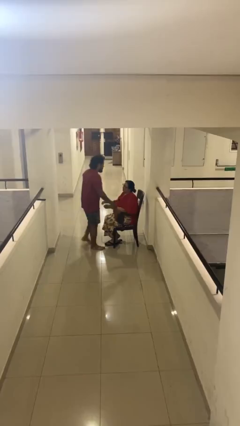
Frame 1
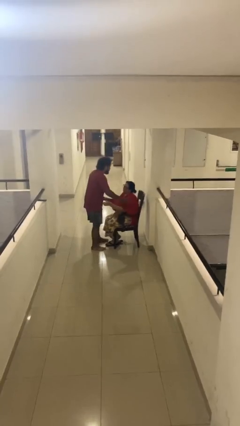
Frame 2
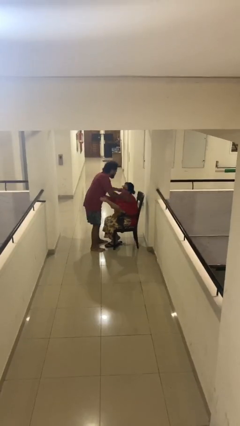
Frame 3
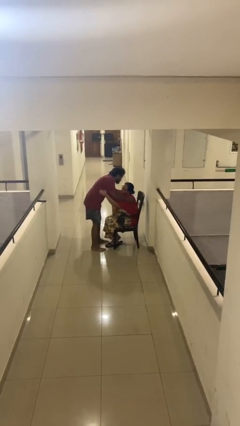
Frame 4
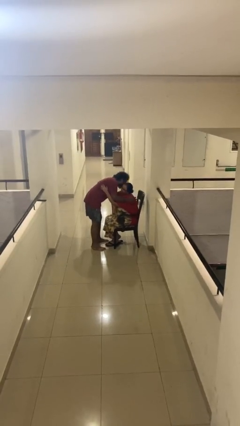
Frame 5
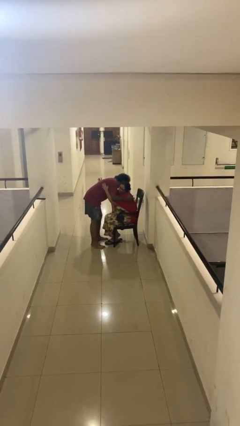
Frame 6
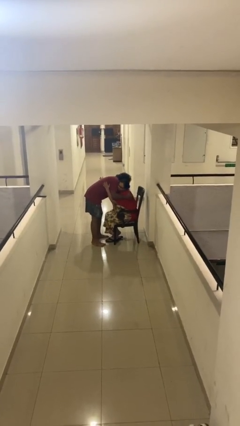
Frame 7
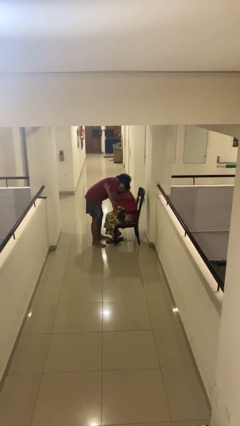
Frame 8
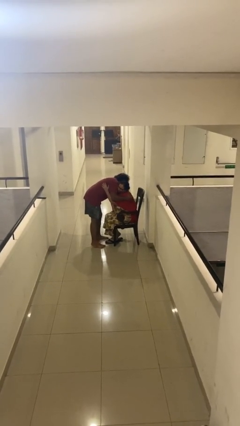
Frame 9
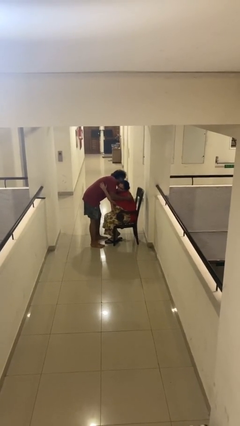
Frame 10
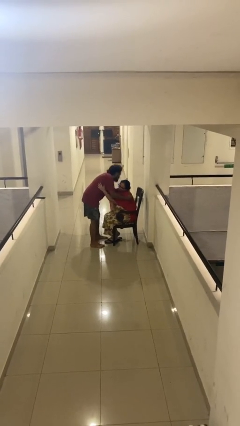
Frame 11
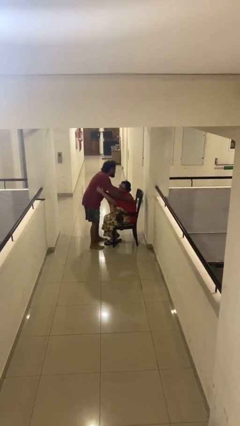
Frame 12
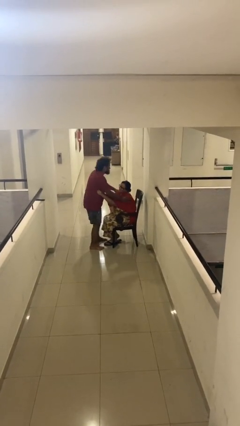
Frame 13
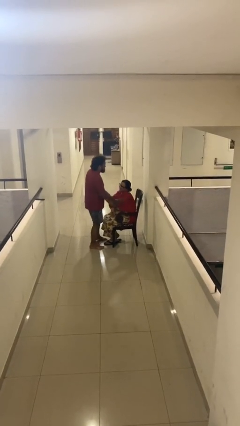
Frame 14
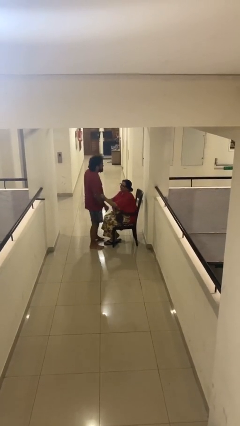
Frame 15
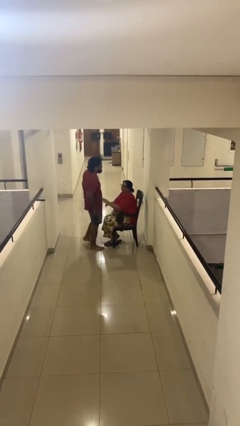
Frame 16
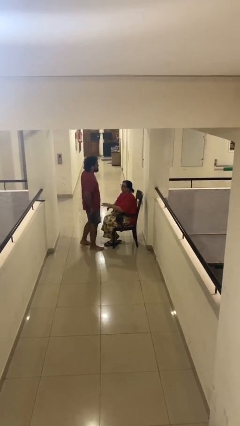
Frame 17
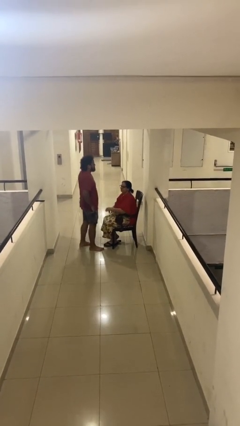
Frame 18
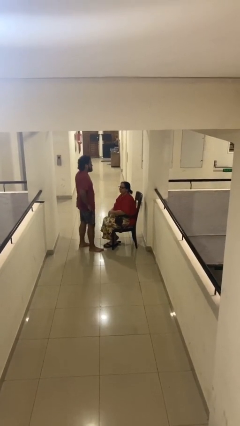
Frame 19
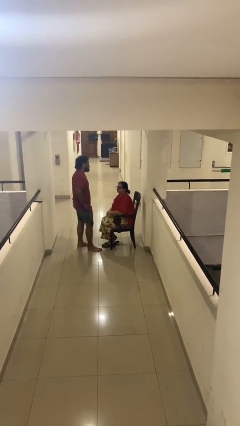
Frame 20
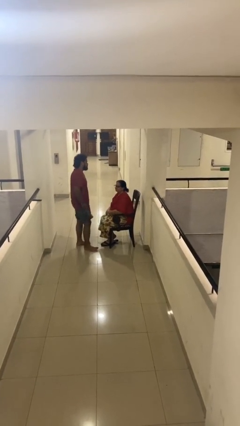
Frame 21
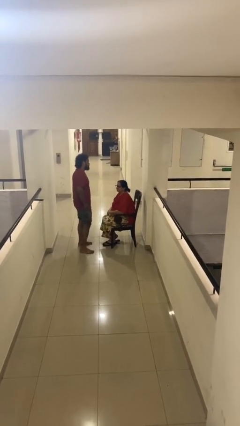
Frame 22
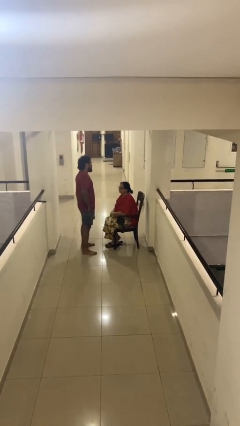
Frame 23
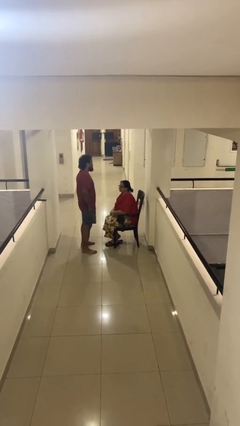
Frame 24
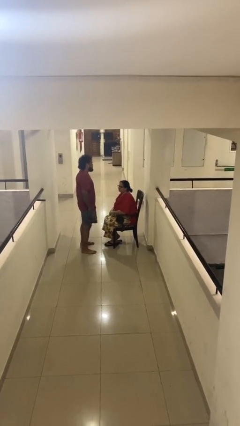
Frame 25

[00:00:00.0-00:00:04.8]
person embraces person

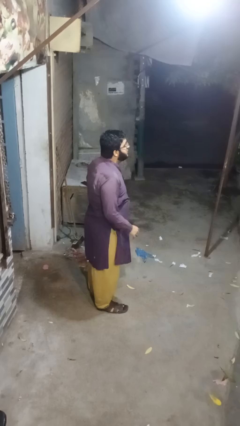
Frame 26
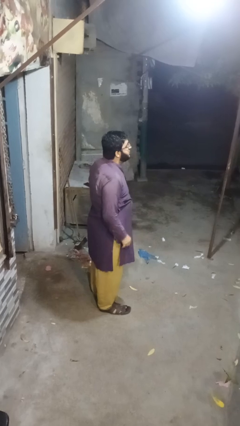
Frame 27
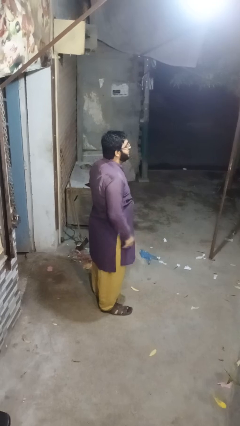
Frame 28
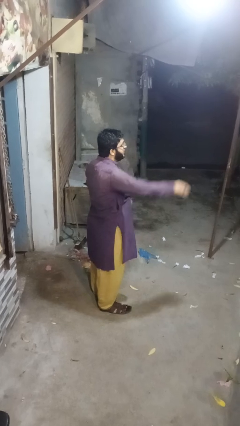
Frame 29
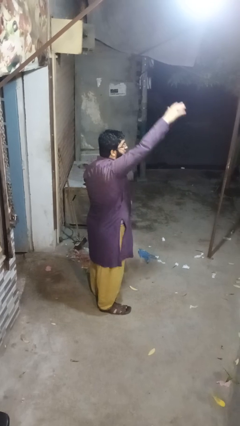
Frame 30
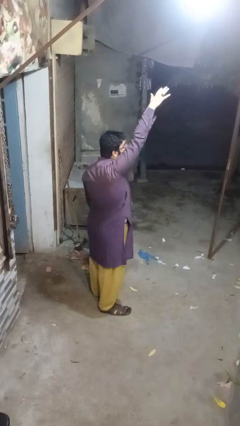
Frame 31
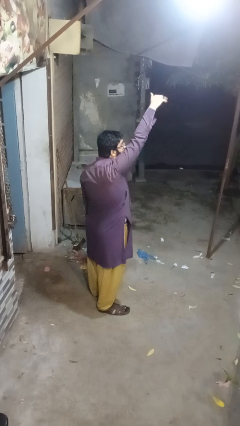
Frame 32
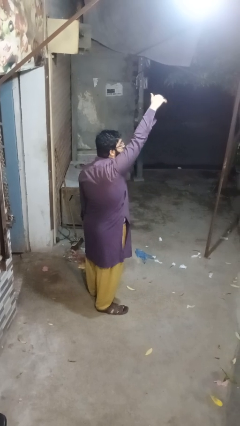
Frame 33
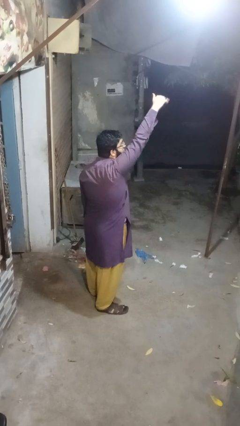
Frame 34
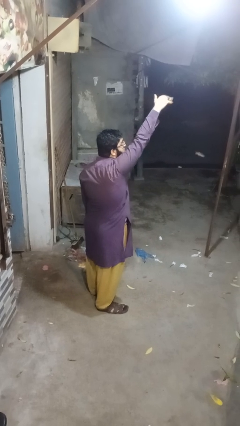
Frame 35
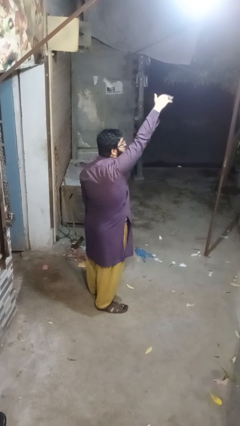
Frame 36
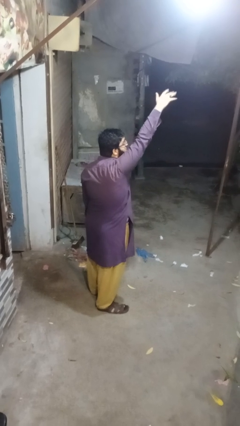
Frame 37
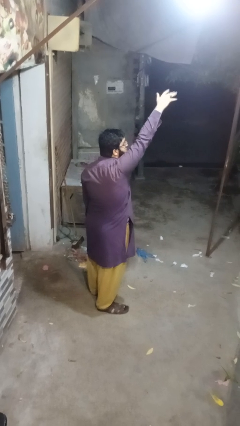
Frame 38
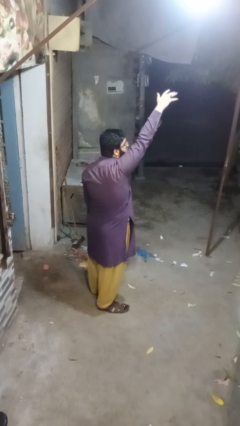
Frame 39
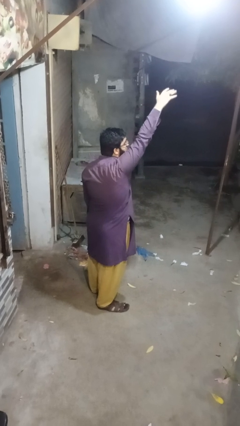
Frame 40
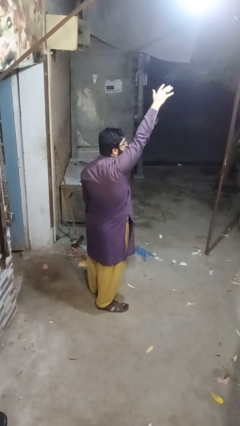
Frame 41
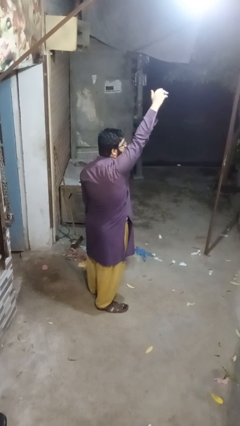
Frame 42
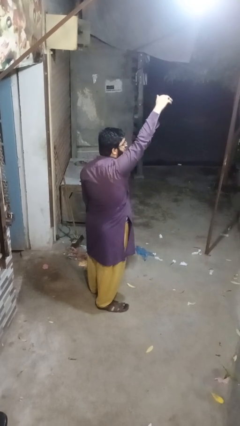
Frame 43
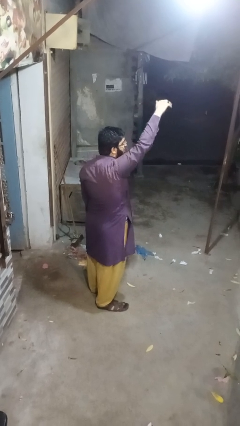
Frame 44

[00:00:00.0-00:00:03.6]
person gestures raise hand

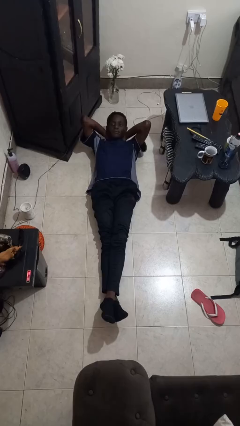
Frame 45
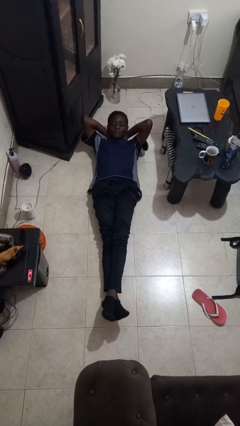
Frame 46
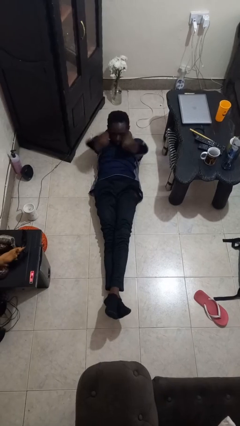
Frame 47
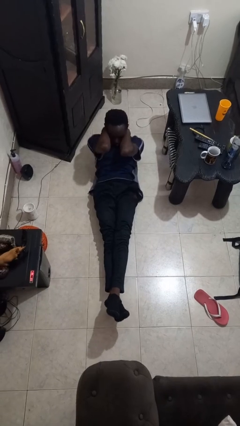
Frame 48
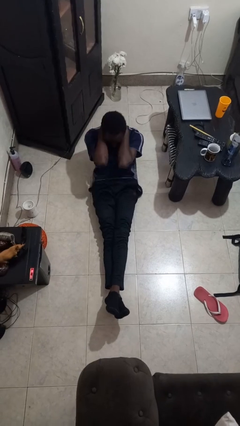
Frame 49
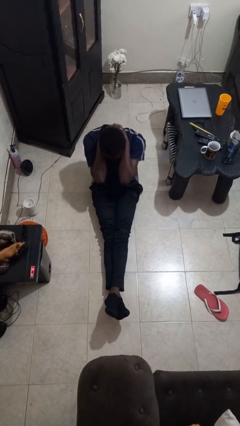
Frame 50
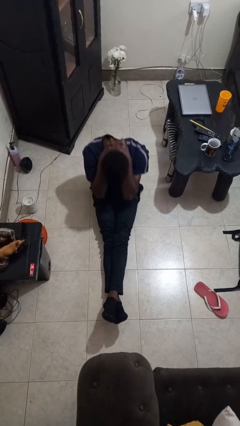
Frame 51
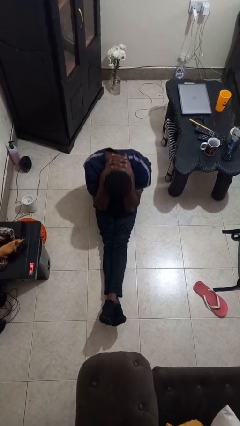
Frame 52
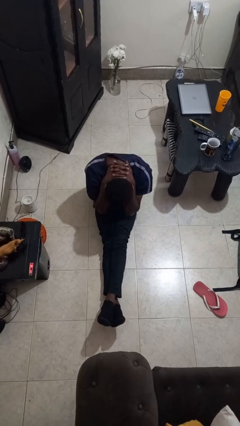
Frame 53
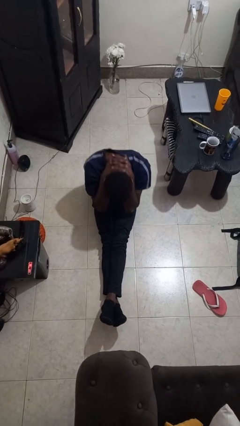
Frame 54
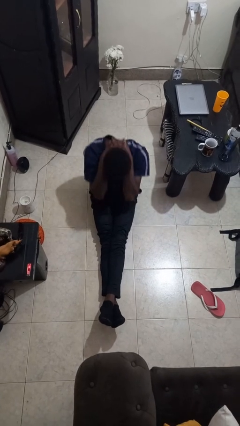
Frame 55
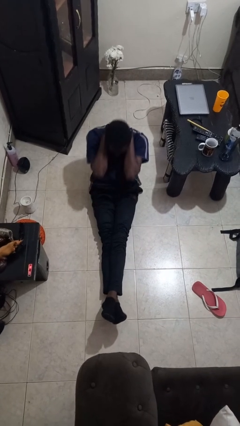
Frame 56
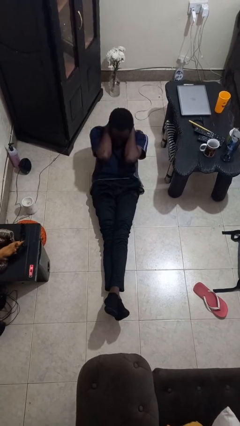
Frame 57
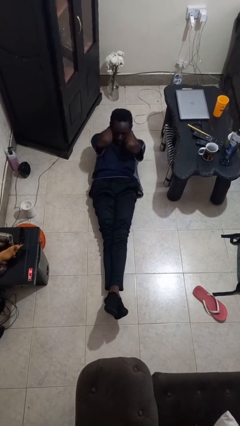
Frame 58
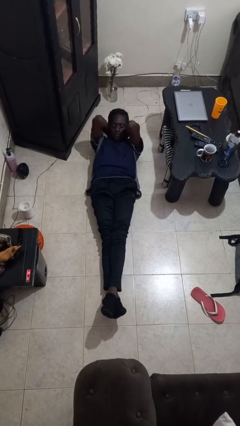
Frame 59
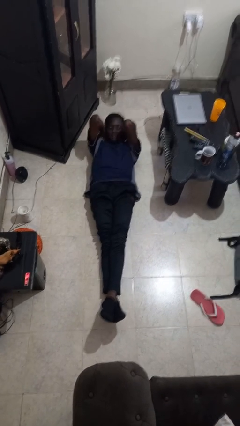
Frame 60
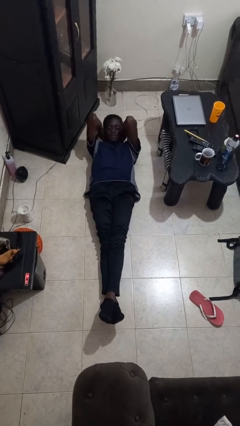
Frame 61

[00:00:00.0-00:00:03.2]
person exercises with situp

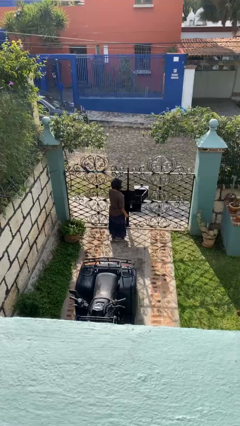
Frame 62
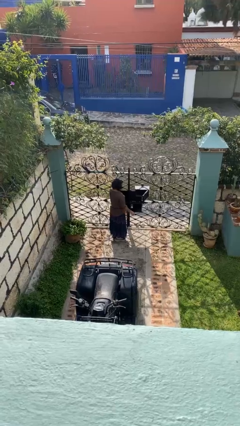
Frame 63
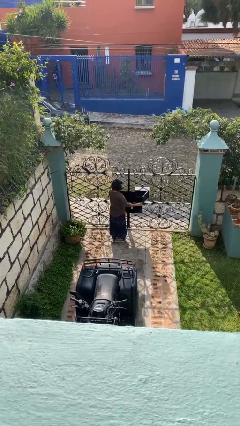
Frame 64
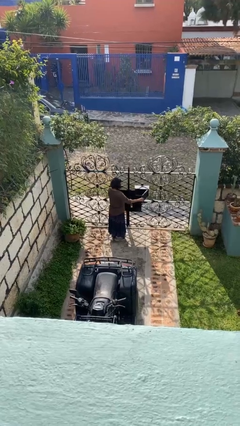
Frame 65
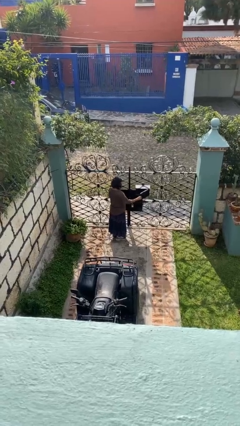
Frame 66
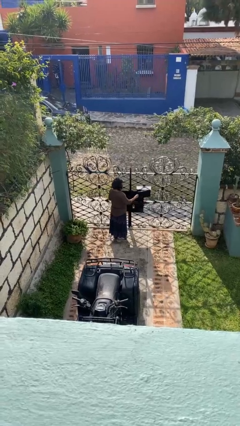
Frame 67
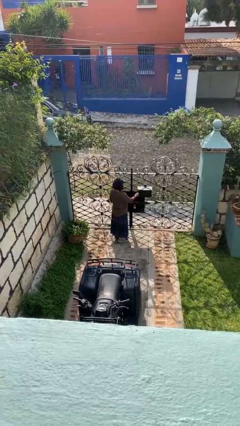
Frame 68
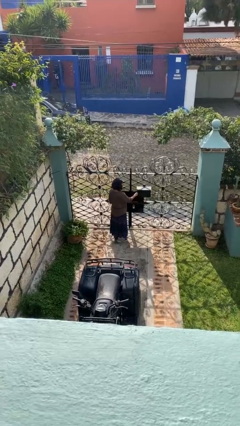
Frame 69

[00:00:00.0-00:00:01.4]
person closes mailbox

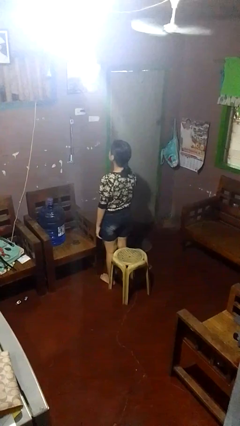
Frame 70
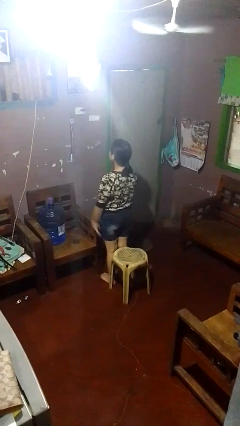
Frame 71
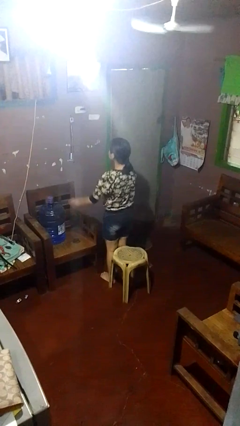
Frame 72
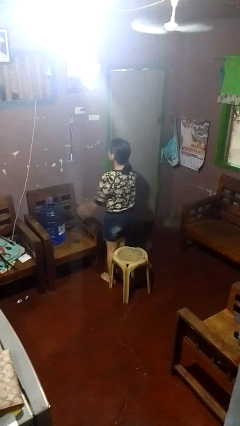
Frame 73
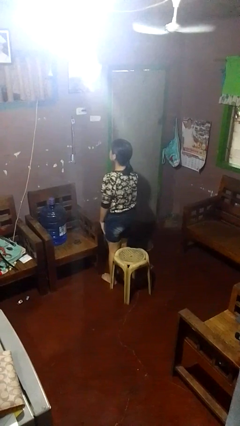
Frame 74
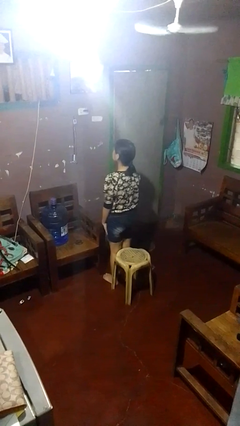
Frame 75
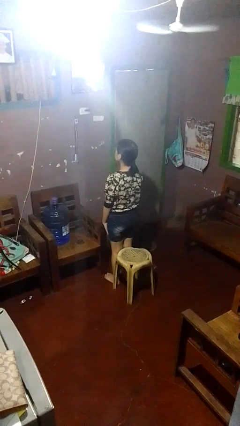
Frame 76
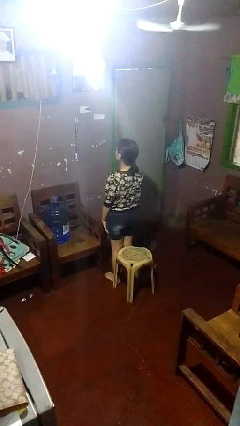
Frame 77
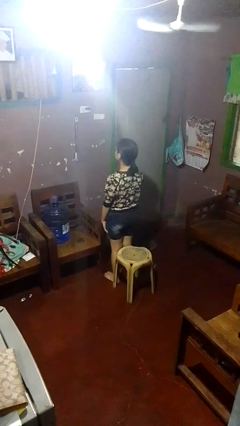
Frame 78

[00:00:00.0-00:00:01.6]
person slaps hands on thighs

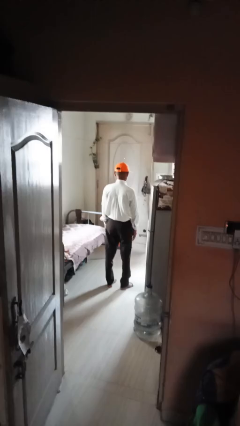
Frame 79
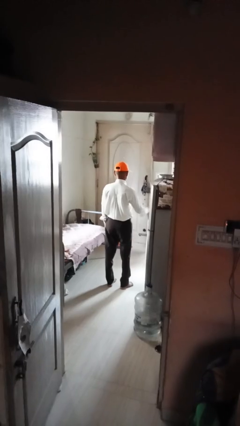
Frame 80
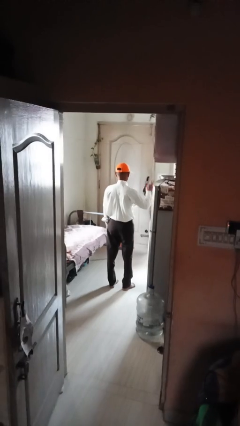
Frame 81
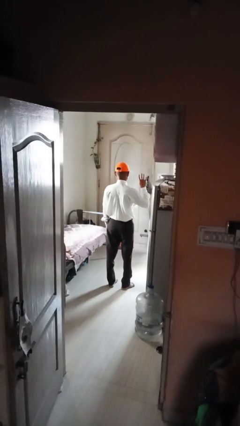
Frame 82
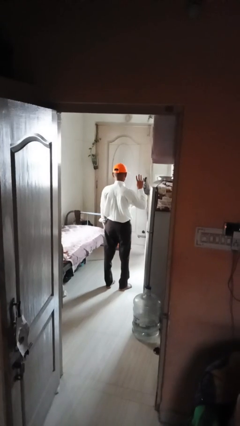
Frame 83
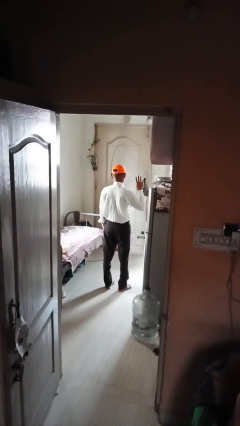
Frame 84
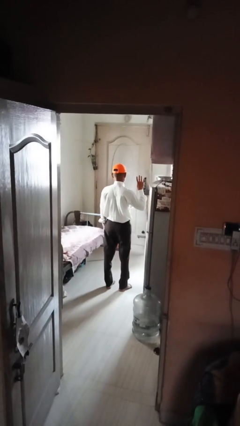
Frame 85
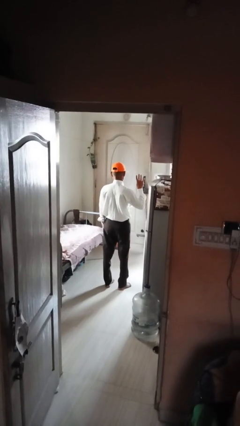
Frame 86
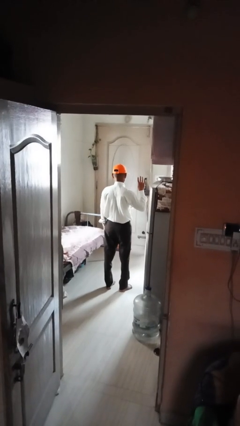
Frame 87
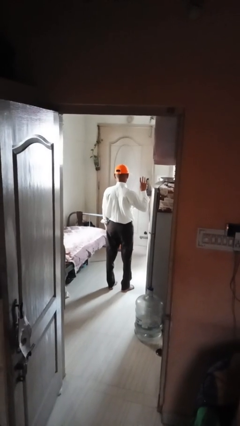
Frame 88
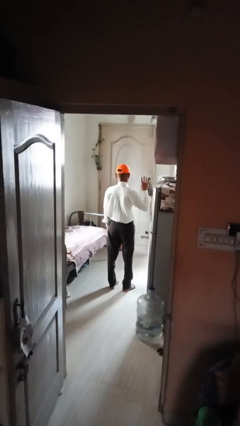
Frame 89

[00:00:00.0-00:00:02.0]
person gestures number four

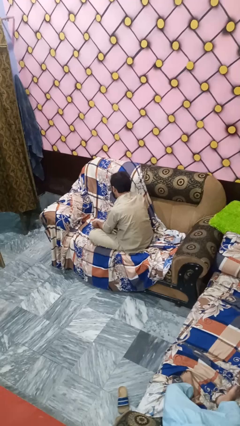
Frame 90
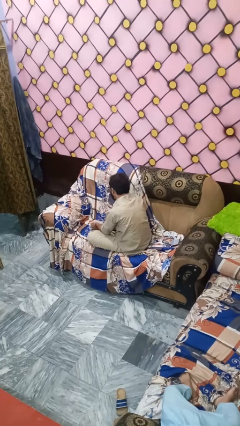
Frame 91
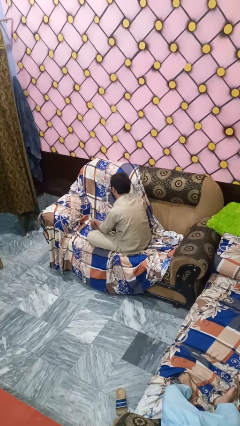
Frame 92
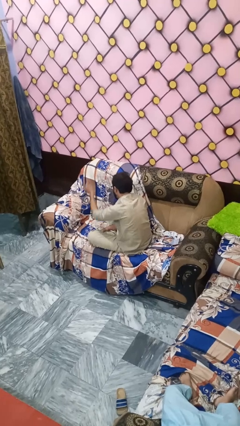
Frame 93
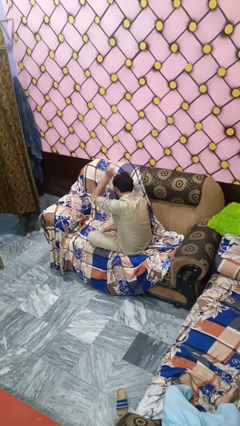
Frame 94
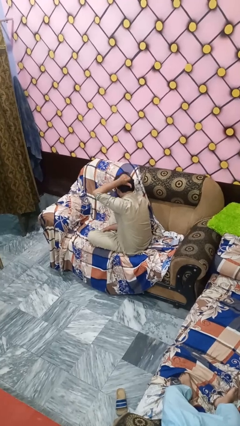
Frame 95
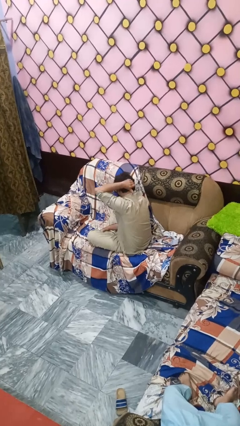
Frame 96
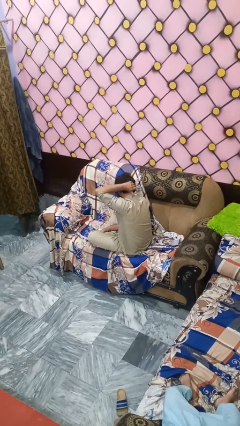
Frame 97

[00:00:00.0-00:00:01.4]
person gestures behind me
